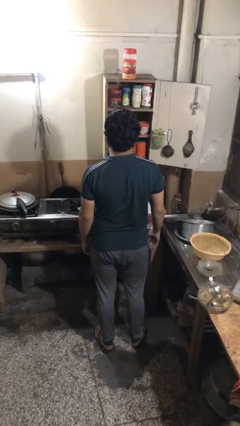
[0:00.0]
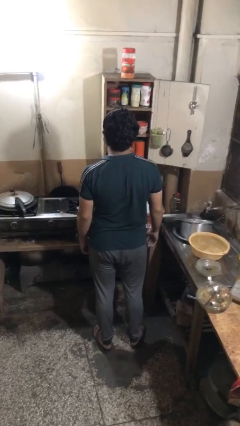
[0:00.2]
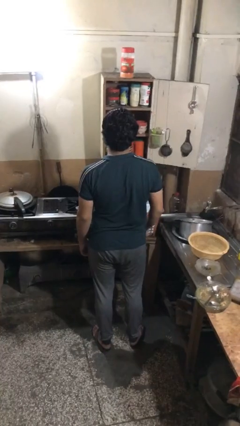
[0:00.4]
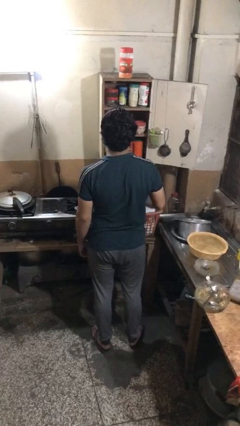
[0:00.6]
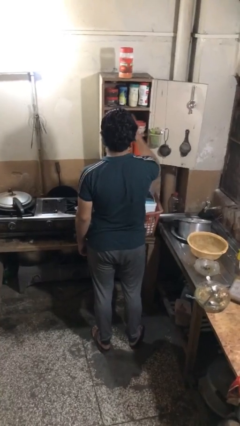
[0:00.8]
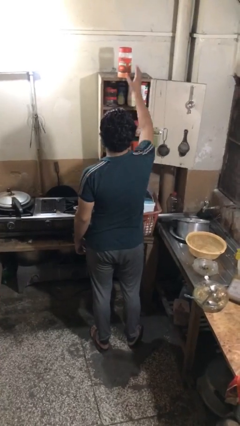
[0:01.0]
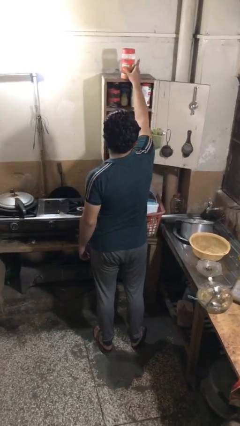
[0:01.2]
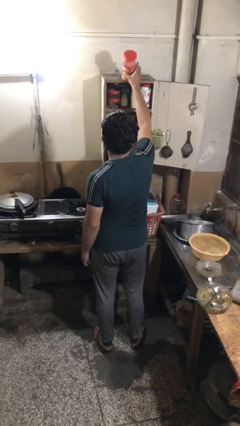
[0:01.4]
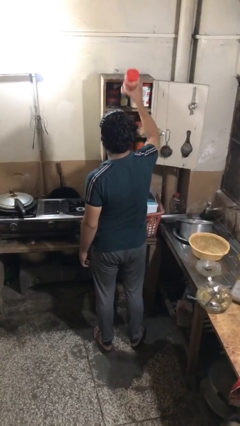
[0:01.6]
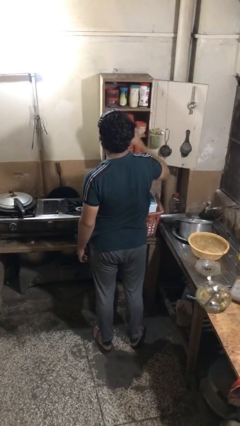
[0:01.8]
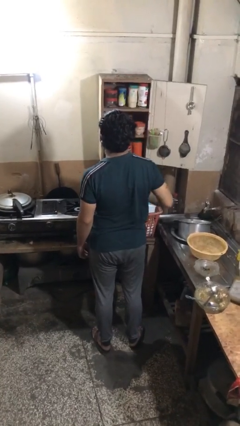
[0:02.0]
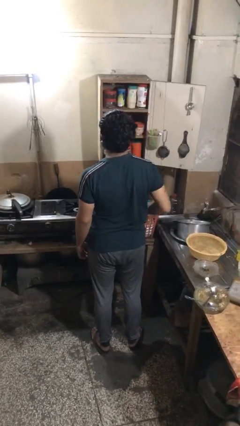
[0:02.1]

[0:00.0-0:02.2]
person puts object in cabinet

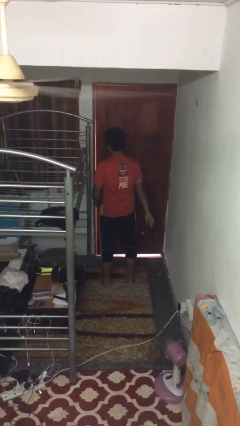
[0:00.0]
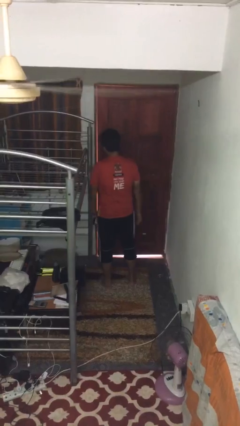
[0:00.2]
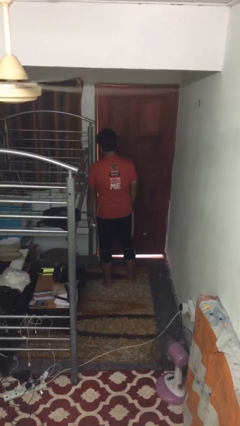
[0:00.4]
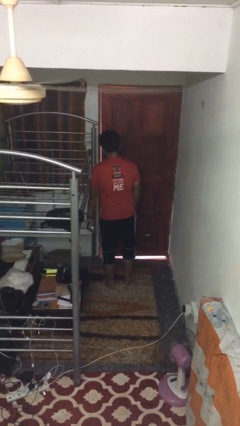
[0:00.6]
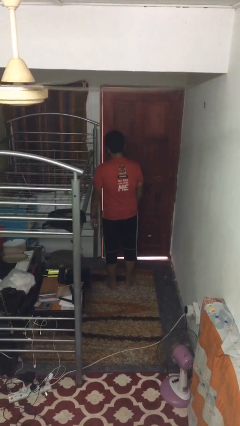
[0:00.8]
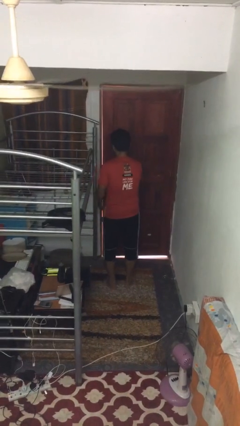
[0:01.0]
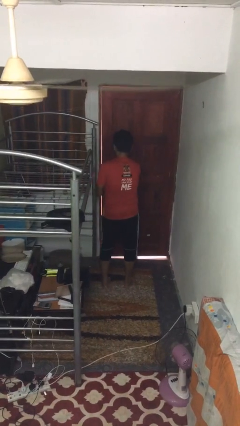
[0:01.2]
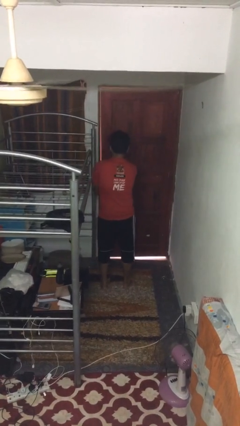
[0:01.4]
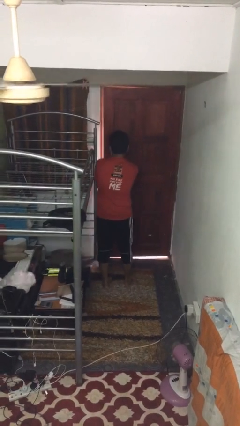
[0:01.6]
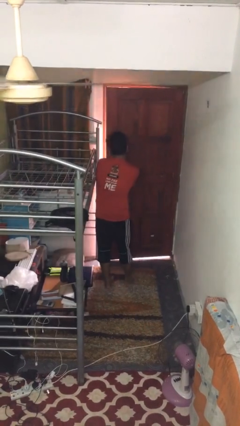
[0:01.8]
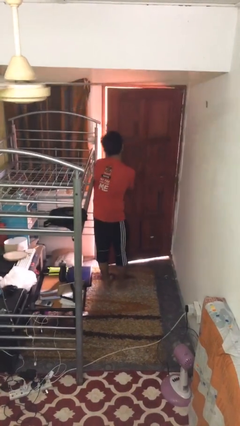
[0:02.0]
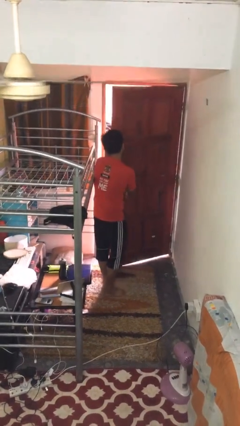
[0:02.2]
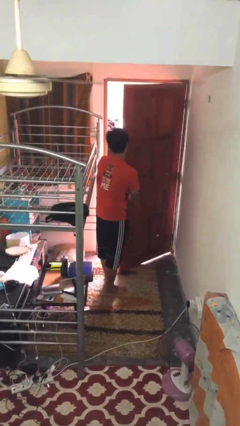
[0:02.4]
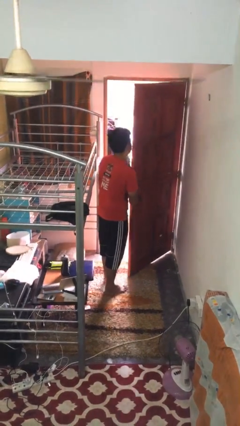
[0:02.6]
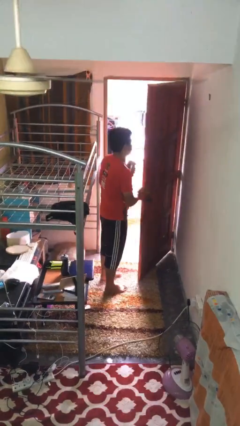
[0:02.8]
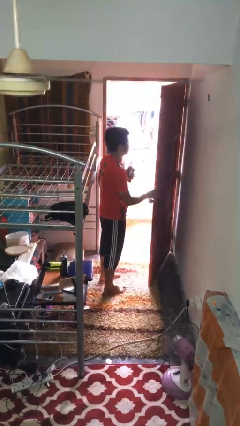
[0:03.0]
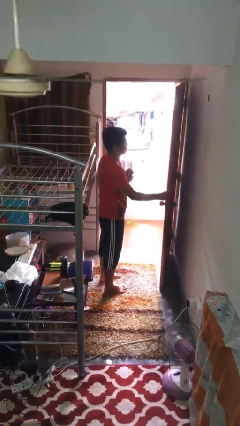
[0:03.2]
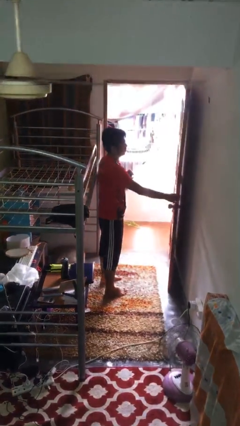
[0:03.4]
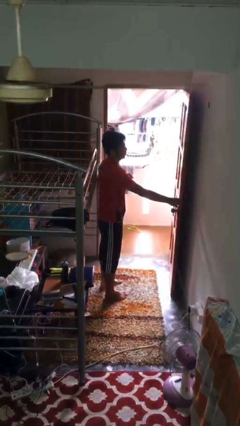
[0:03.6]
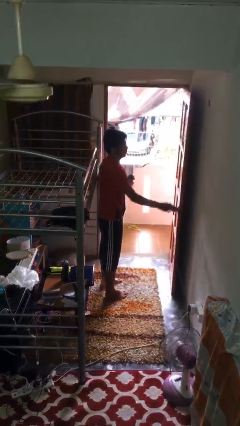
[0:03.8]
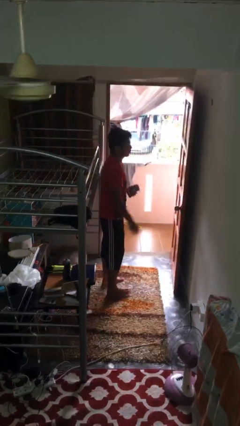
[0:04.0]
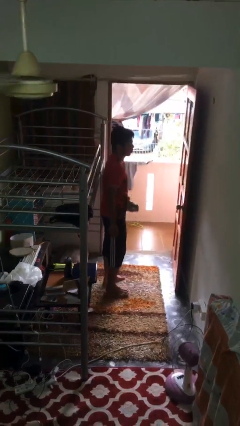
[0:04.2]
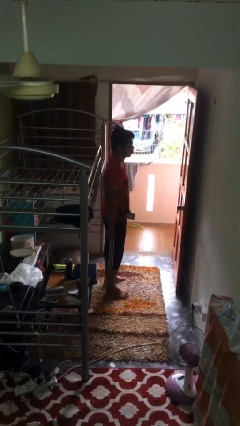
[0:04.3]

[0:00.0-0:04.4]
person opens facility door

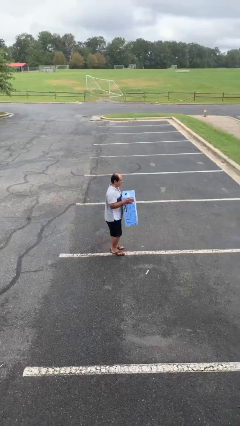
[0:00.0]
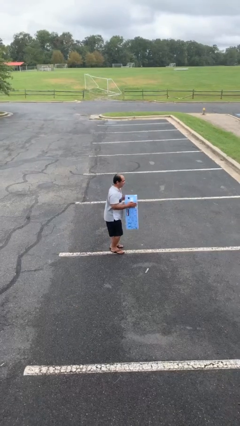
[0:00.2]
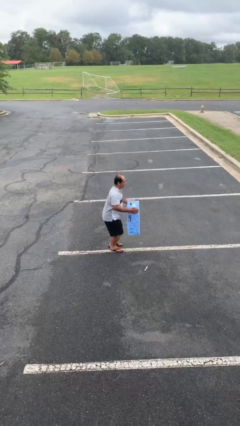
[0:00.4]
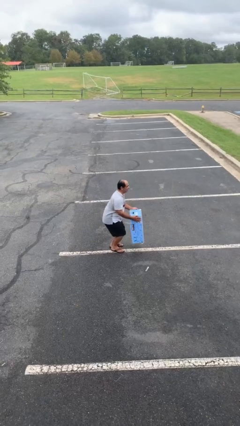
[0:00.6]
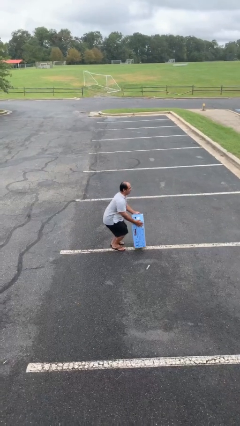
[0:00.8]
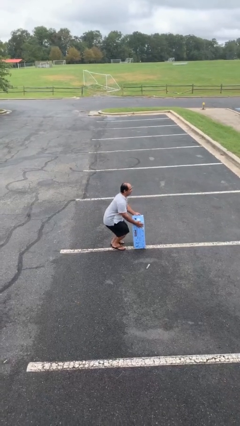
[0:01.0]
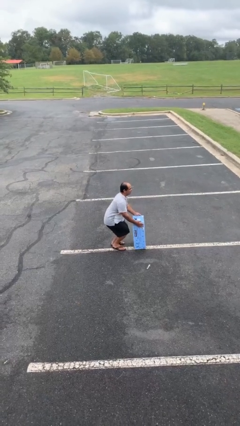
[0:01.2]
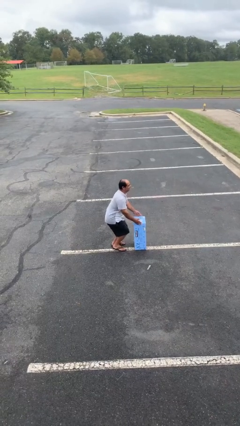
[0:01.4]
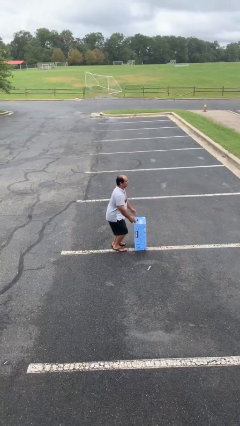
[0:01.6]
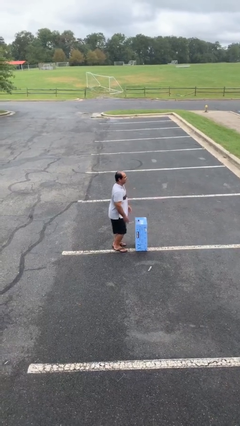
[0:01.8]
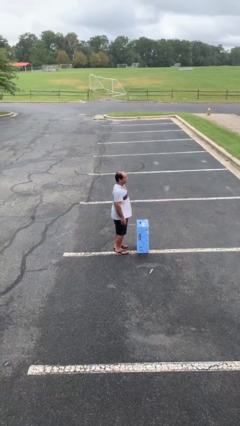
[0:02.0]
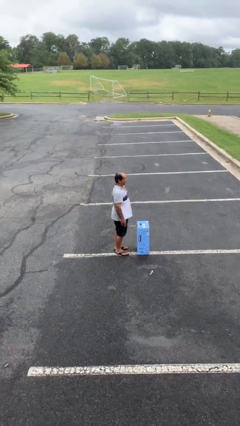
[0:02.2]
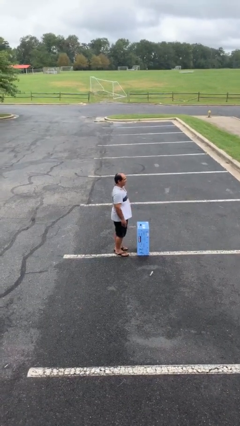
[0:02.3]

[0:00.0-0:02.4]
person puts down object on floor

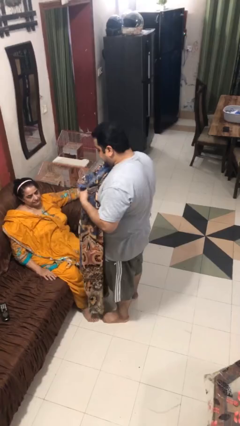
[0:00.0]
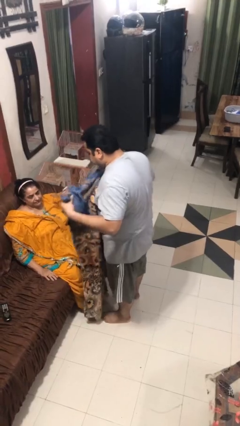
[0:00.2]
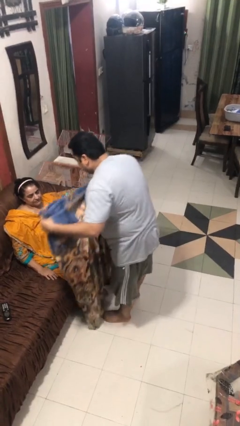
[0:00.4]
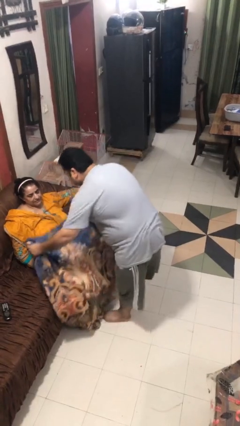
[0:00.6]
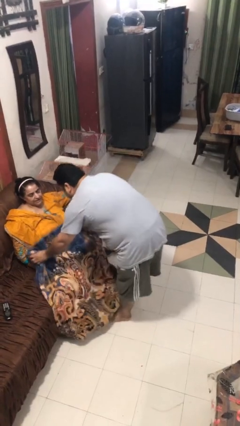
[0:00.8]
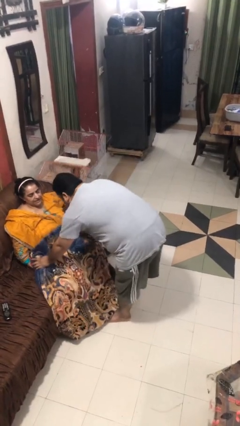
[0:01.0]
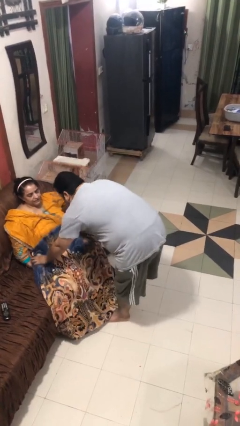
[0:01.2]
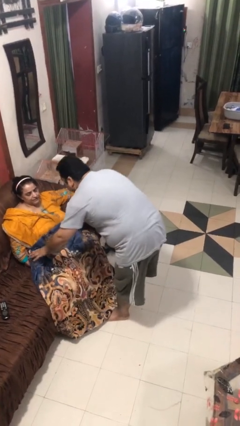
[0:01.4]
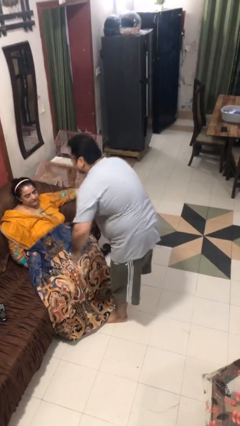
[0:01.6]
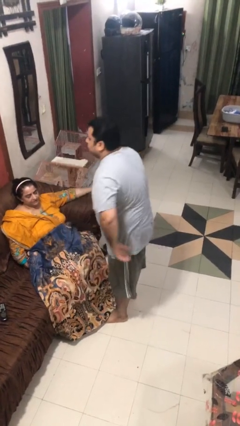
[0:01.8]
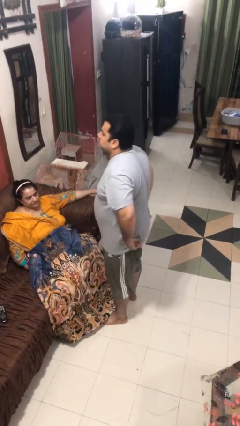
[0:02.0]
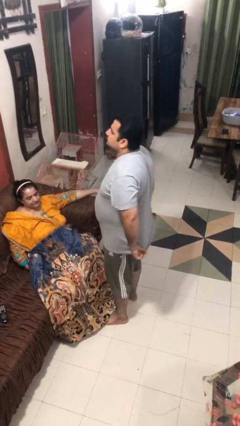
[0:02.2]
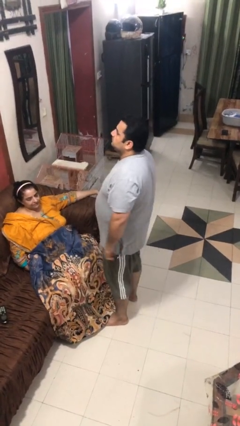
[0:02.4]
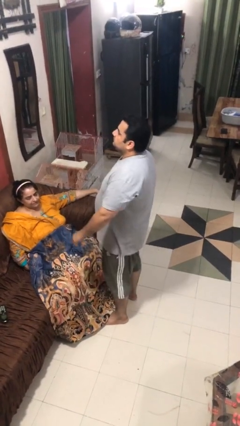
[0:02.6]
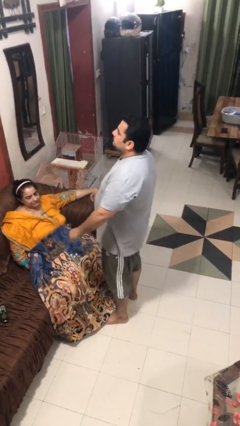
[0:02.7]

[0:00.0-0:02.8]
person covers friend with blanket

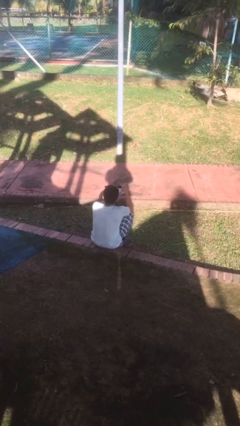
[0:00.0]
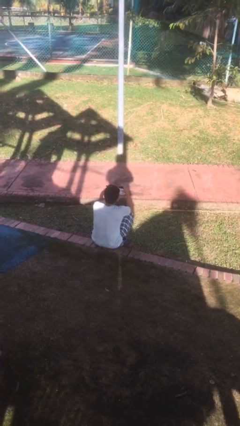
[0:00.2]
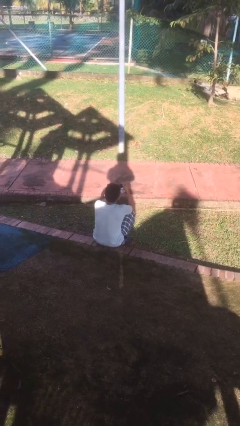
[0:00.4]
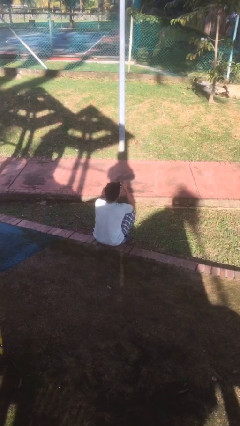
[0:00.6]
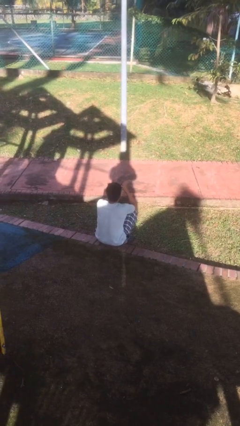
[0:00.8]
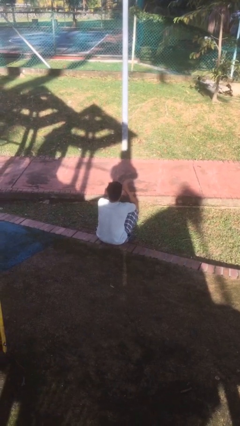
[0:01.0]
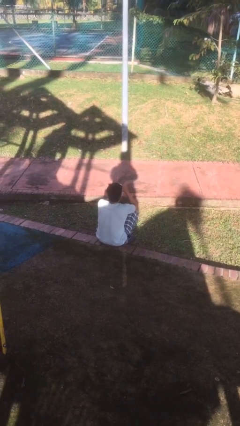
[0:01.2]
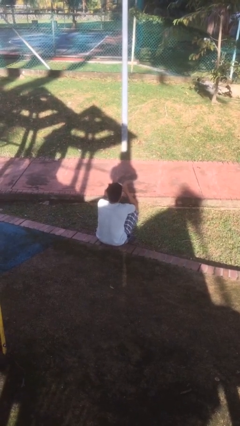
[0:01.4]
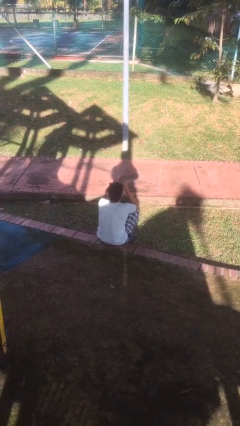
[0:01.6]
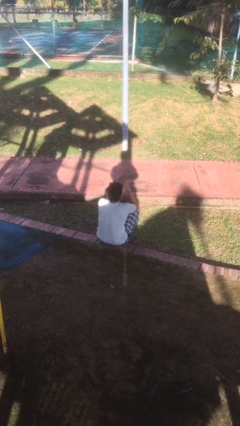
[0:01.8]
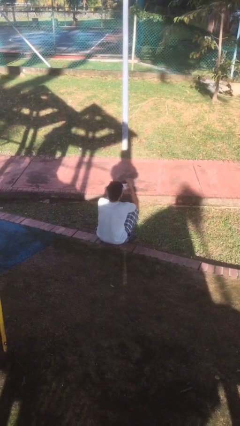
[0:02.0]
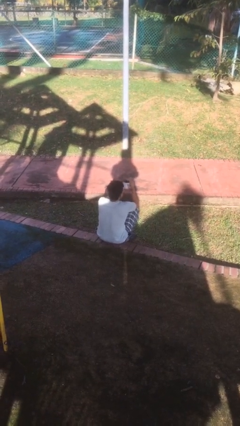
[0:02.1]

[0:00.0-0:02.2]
person drinks from mug

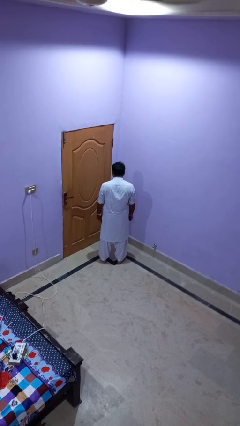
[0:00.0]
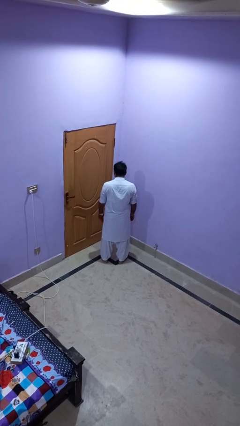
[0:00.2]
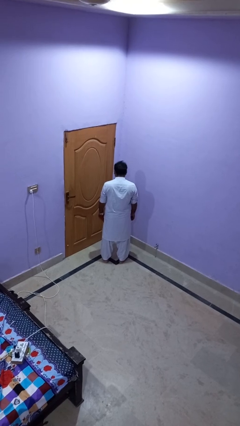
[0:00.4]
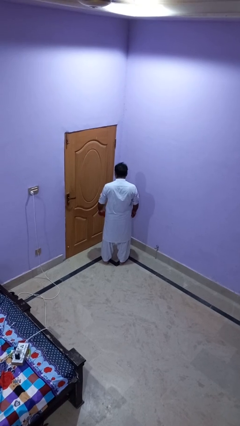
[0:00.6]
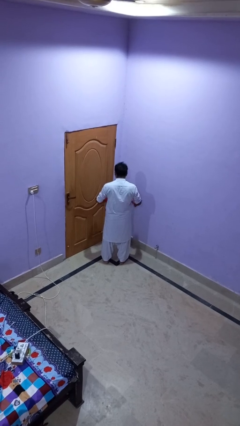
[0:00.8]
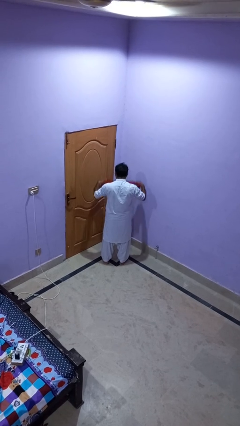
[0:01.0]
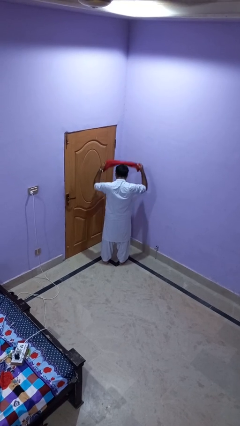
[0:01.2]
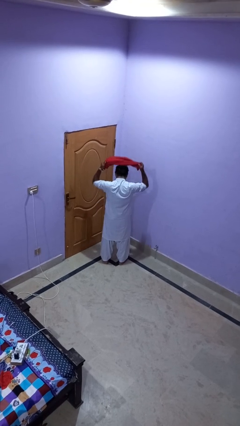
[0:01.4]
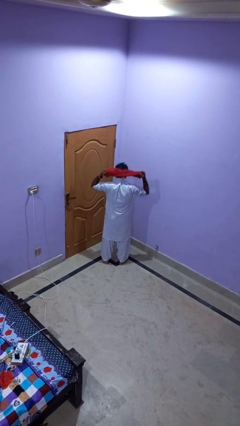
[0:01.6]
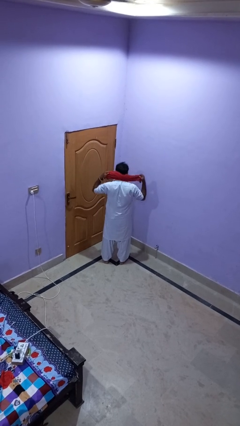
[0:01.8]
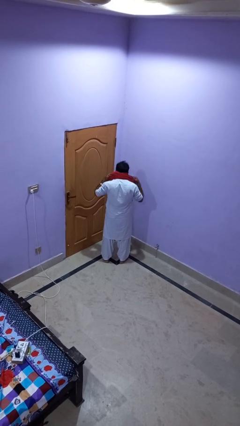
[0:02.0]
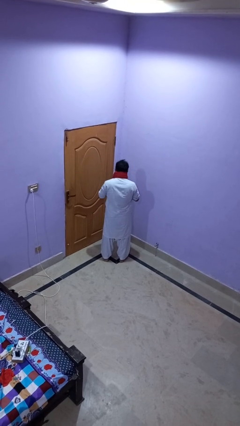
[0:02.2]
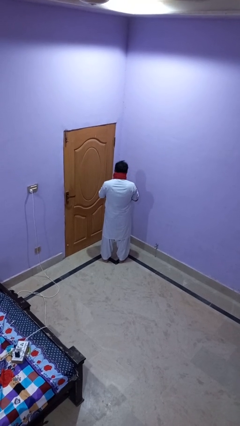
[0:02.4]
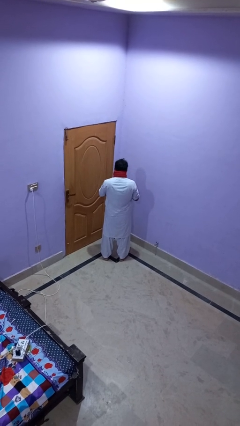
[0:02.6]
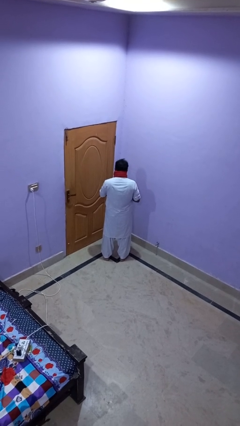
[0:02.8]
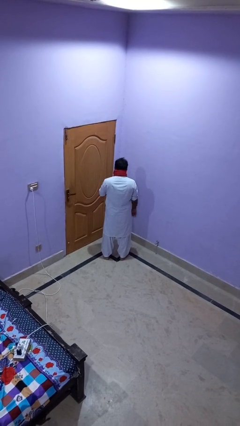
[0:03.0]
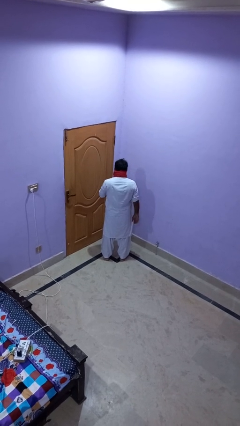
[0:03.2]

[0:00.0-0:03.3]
person puts on scarf
